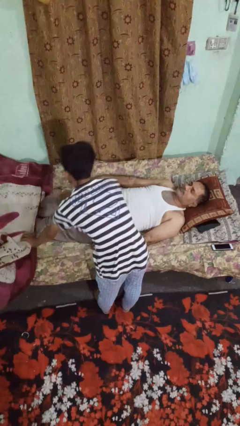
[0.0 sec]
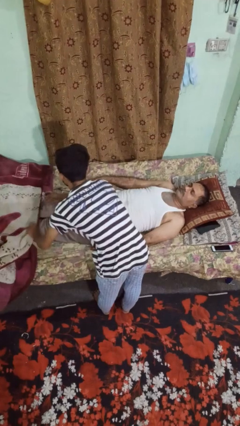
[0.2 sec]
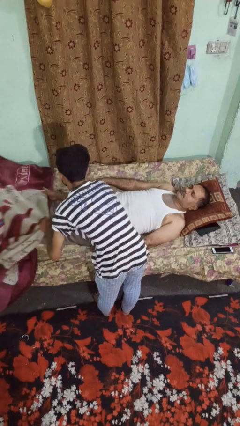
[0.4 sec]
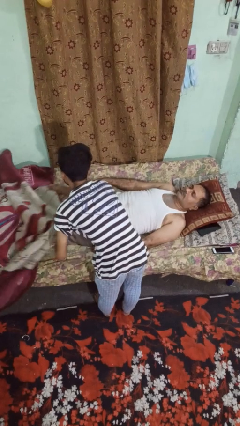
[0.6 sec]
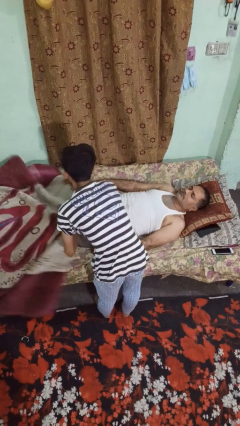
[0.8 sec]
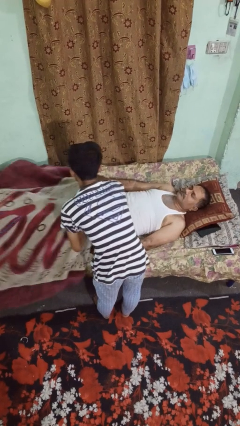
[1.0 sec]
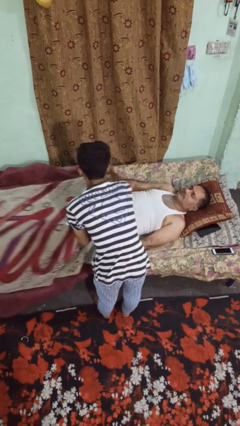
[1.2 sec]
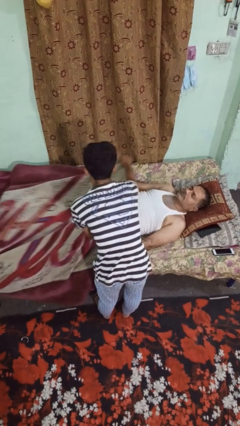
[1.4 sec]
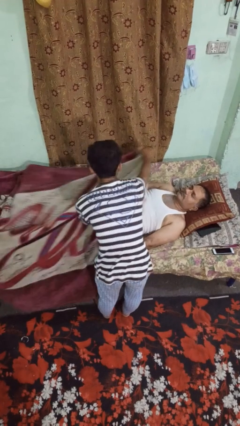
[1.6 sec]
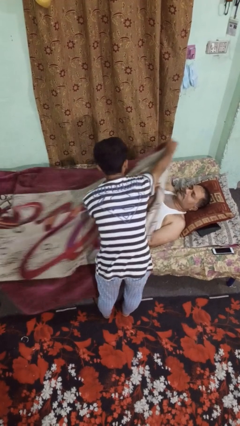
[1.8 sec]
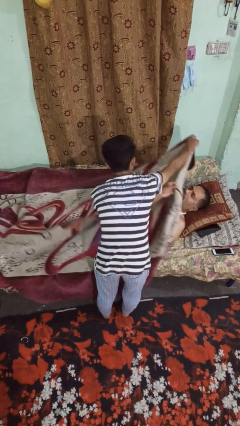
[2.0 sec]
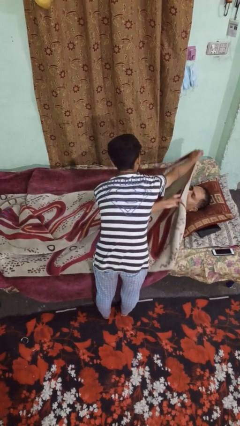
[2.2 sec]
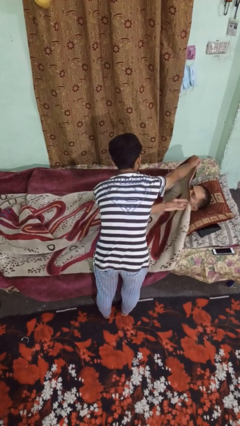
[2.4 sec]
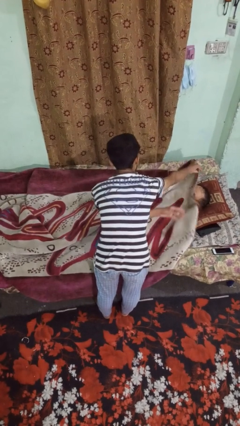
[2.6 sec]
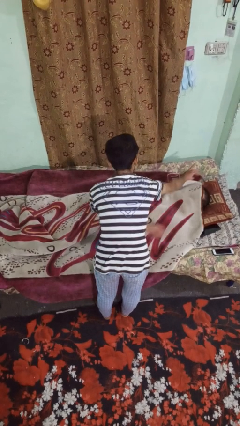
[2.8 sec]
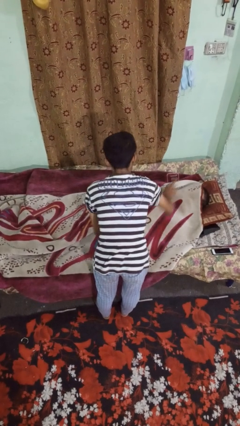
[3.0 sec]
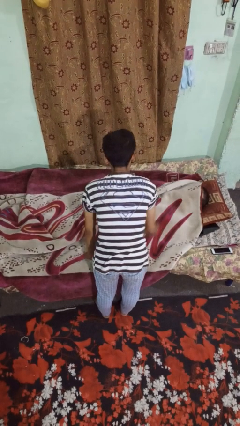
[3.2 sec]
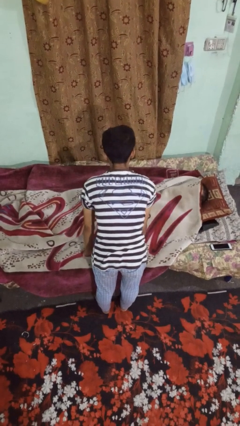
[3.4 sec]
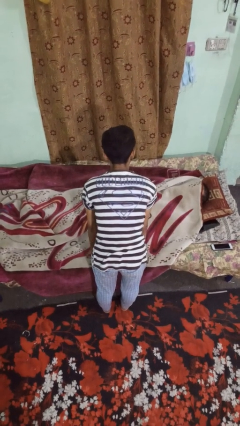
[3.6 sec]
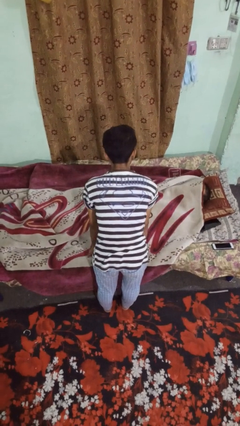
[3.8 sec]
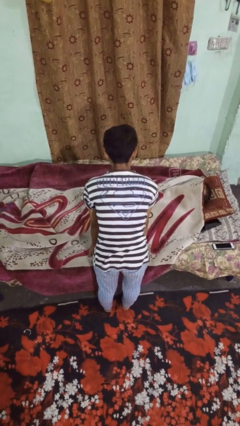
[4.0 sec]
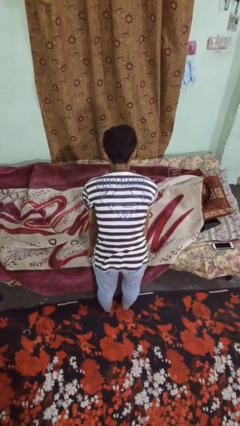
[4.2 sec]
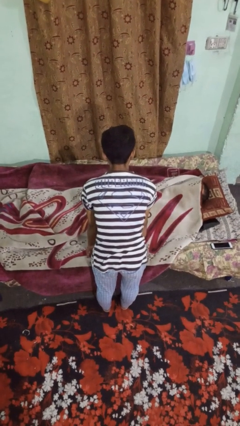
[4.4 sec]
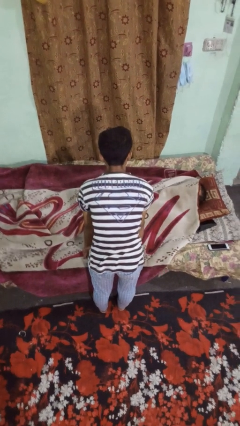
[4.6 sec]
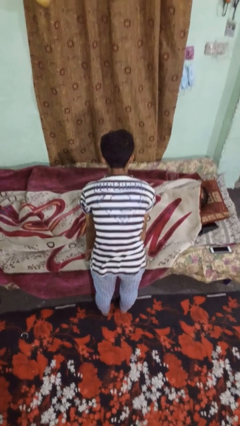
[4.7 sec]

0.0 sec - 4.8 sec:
person covers friend with blanket

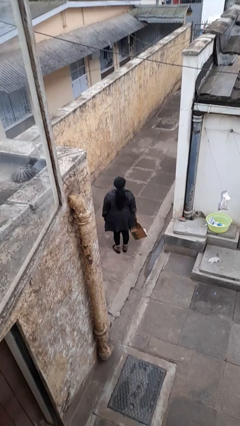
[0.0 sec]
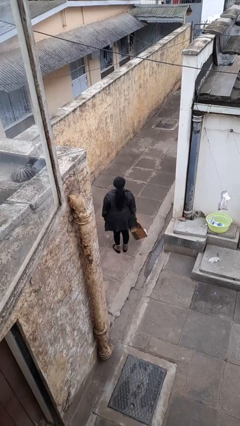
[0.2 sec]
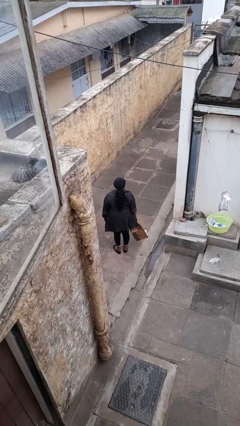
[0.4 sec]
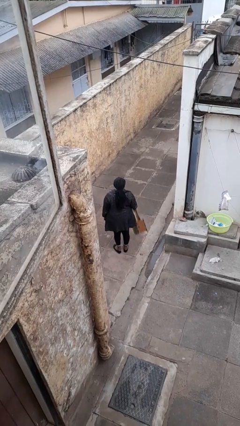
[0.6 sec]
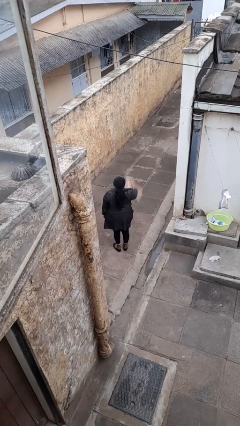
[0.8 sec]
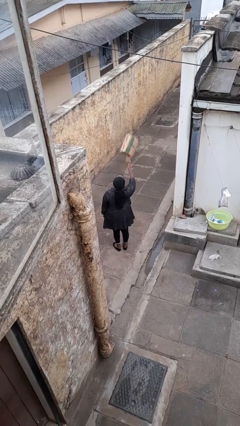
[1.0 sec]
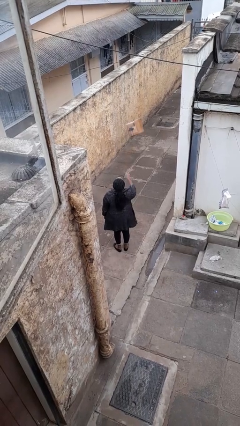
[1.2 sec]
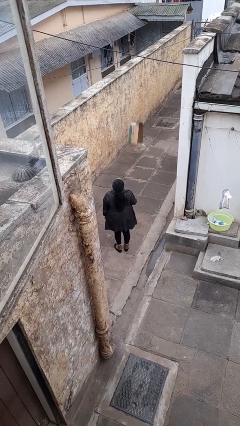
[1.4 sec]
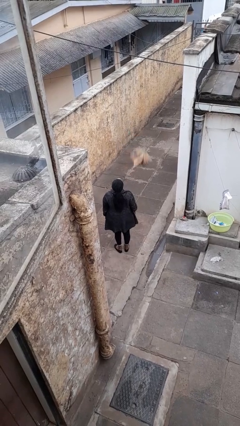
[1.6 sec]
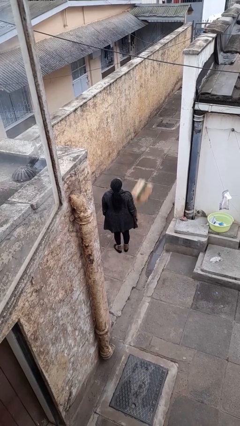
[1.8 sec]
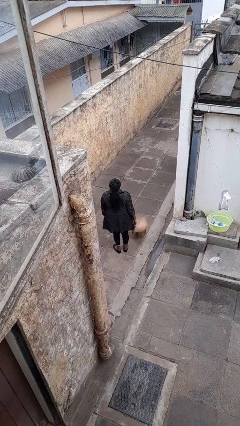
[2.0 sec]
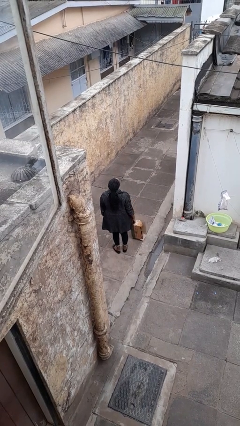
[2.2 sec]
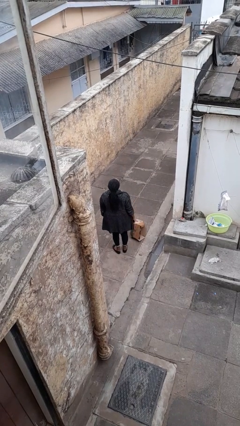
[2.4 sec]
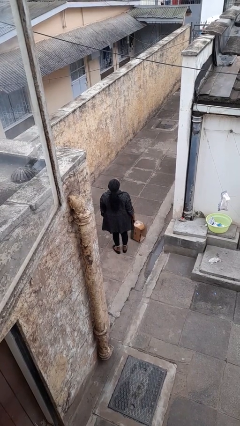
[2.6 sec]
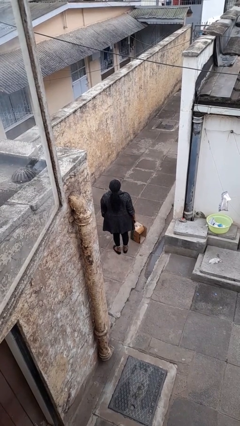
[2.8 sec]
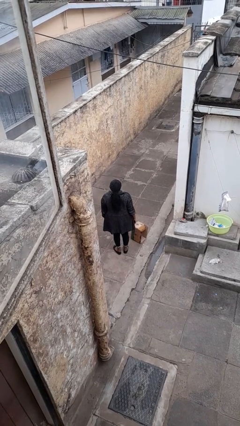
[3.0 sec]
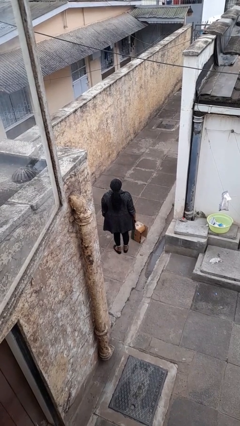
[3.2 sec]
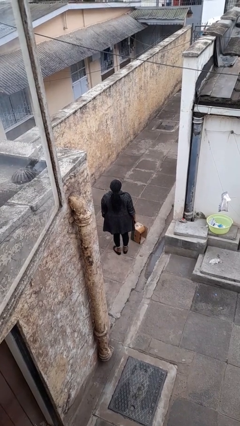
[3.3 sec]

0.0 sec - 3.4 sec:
person throws object into air

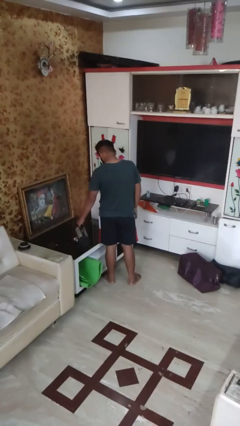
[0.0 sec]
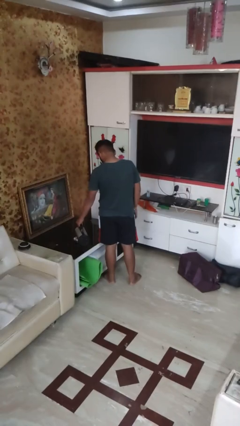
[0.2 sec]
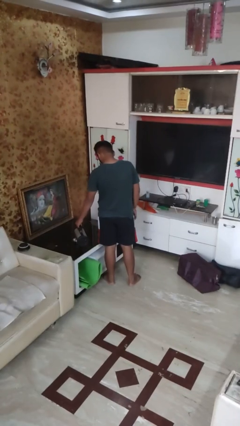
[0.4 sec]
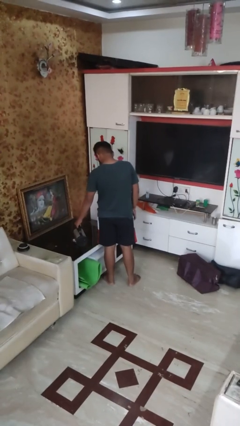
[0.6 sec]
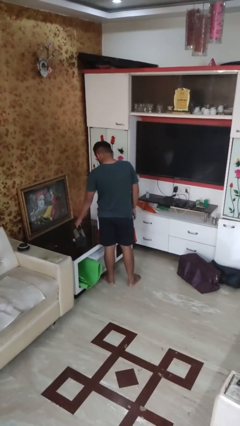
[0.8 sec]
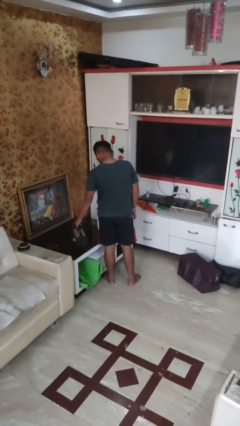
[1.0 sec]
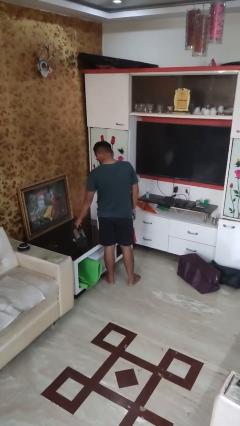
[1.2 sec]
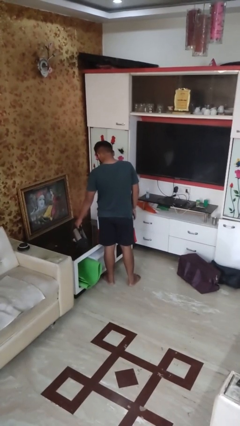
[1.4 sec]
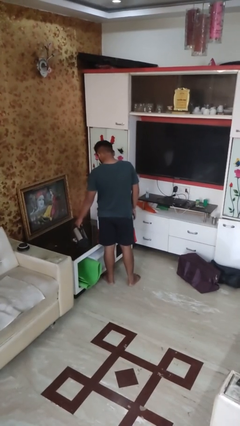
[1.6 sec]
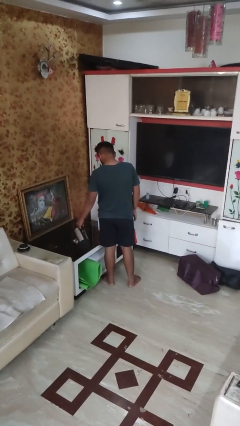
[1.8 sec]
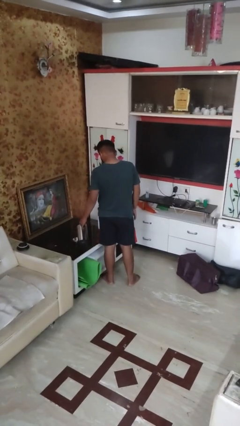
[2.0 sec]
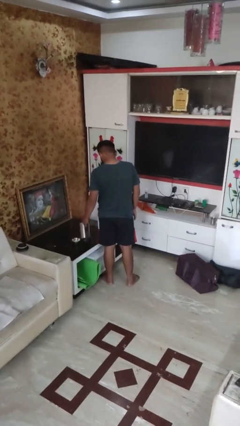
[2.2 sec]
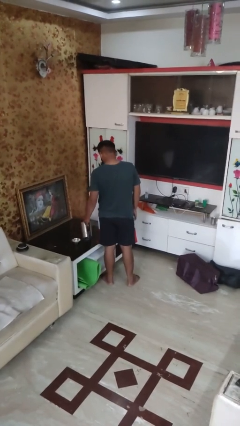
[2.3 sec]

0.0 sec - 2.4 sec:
person pours into bowl

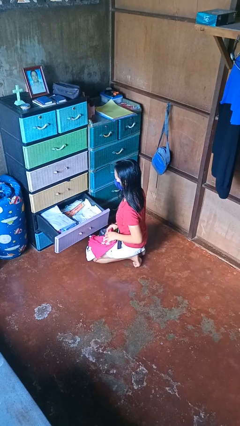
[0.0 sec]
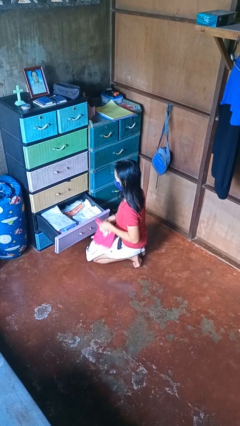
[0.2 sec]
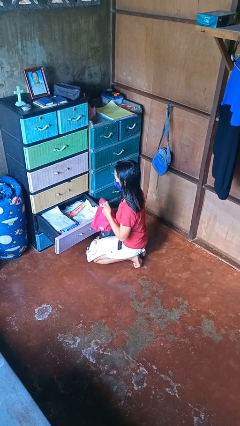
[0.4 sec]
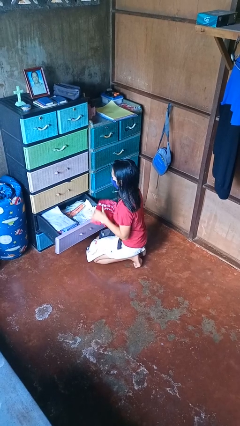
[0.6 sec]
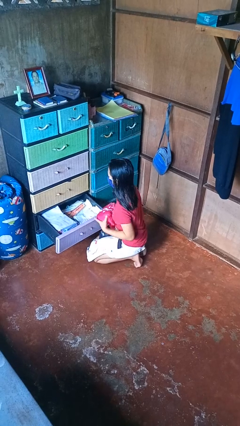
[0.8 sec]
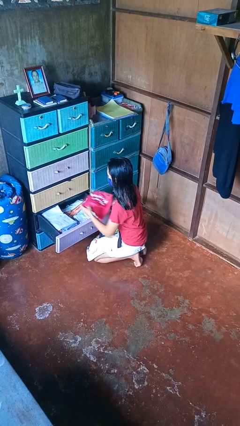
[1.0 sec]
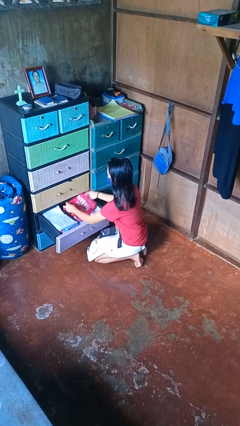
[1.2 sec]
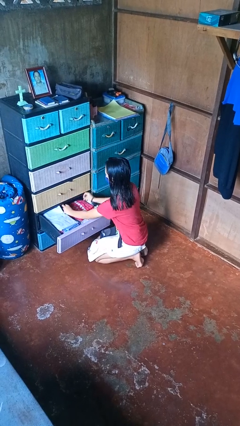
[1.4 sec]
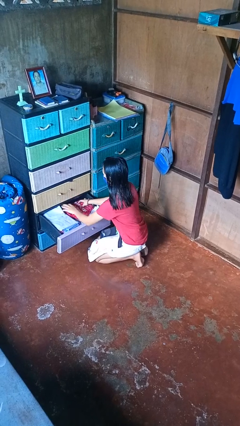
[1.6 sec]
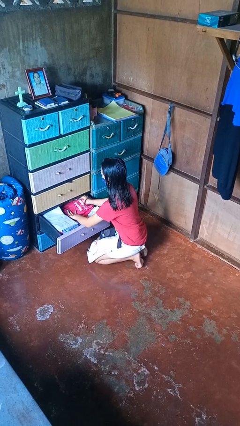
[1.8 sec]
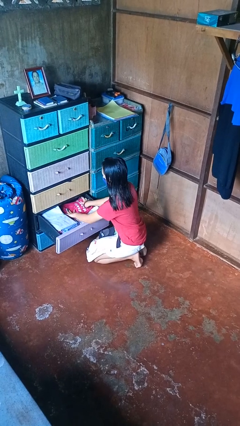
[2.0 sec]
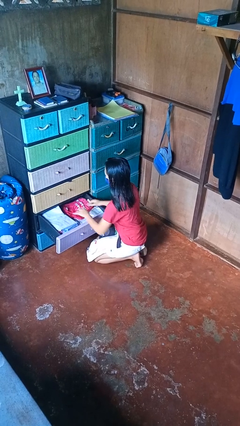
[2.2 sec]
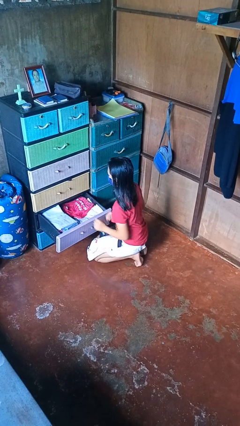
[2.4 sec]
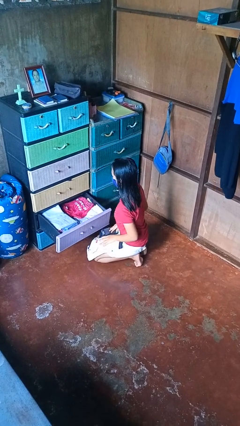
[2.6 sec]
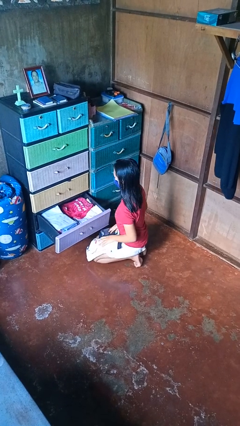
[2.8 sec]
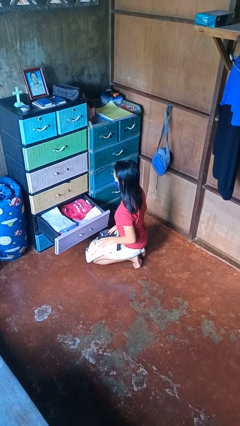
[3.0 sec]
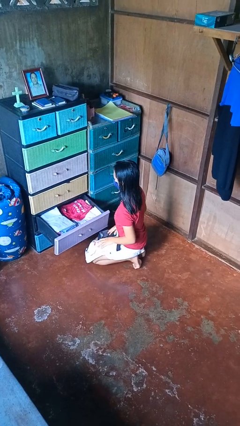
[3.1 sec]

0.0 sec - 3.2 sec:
person puts clothes into dresser

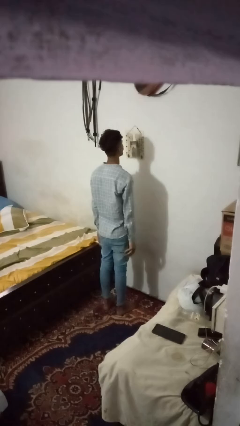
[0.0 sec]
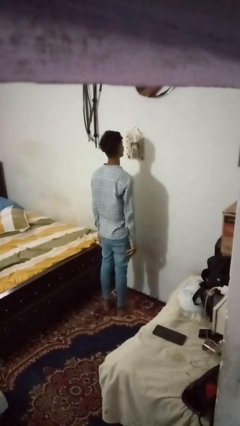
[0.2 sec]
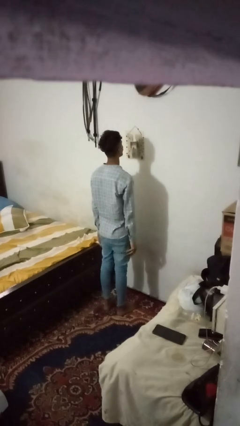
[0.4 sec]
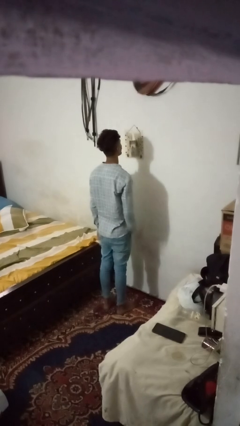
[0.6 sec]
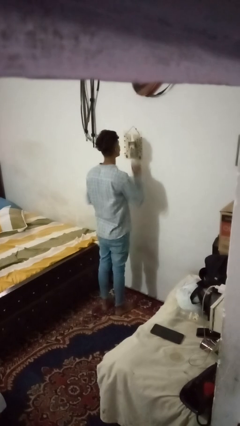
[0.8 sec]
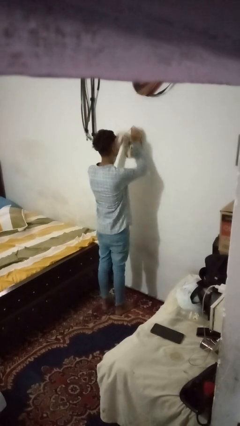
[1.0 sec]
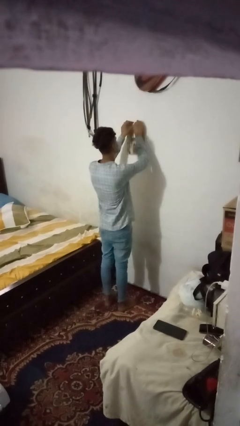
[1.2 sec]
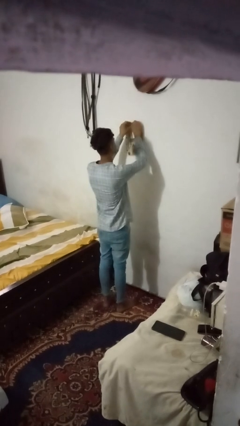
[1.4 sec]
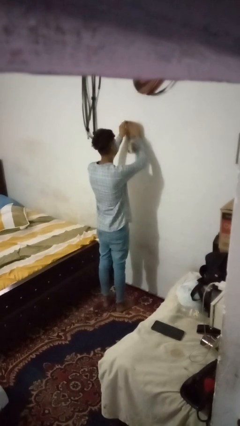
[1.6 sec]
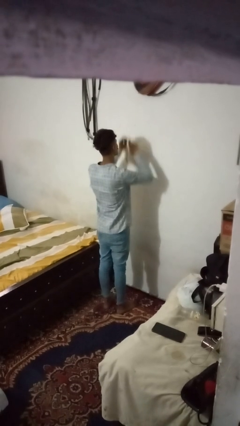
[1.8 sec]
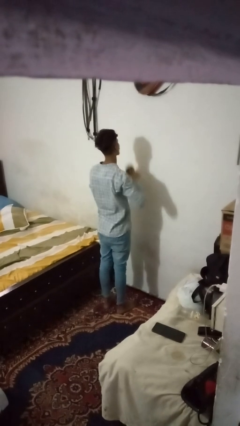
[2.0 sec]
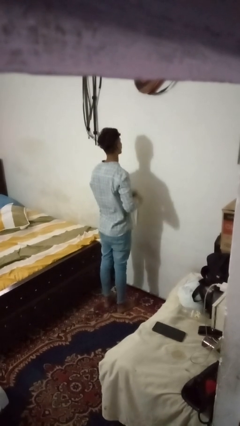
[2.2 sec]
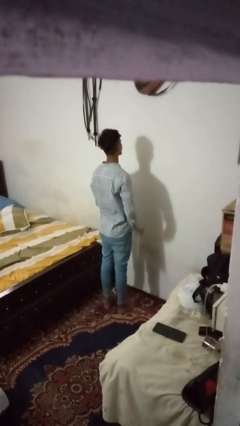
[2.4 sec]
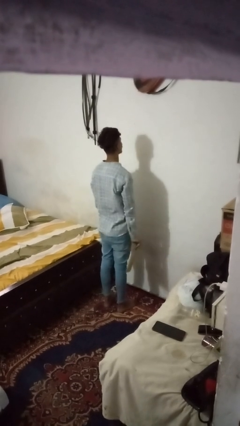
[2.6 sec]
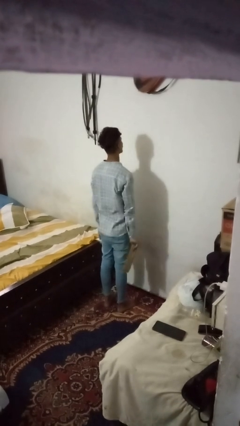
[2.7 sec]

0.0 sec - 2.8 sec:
person takes down picture frame

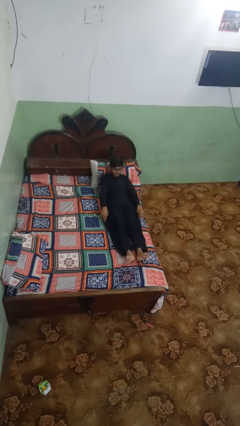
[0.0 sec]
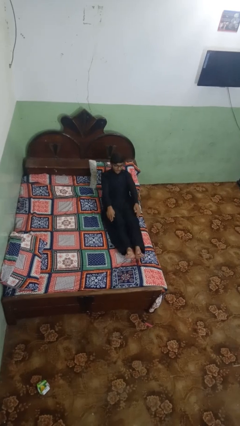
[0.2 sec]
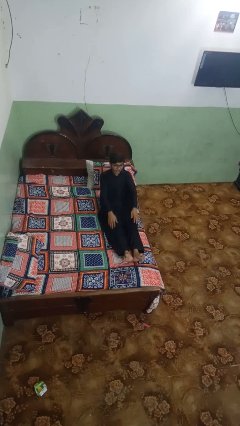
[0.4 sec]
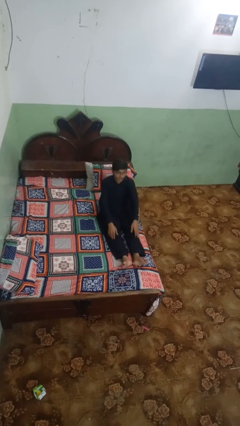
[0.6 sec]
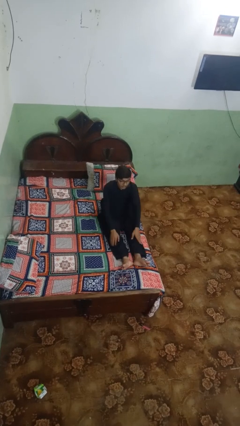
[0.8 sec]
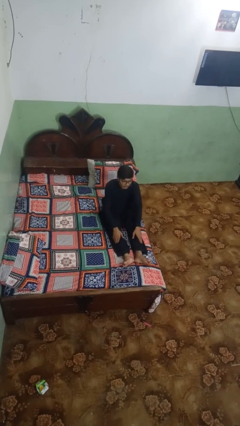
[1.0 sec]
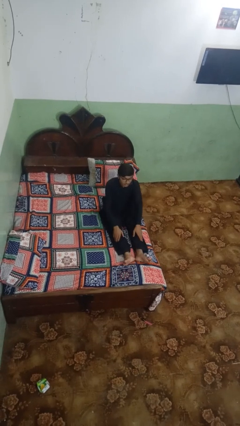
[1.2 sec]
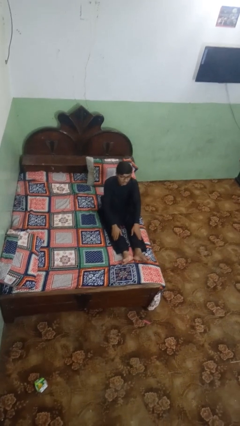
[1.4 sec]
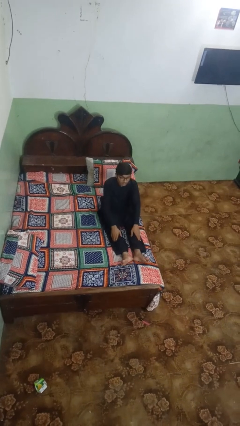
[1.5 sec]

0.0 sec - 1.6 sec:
person stands up
